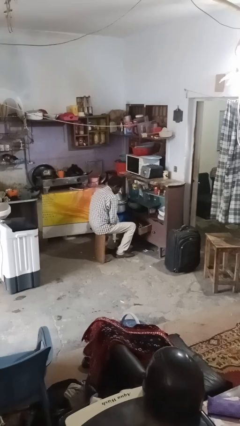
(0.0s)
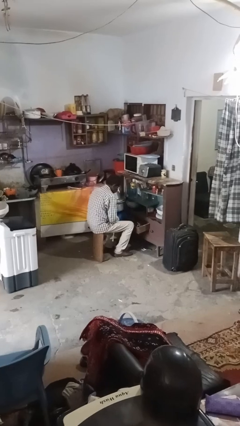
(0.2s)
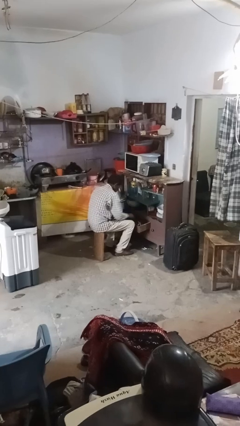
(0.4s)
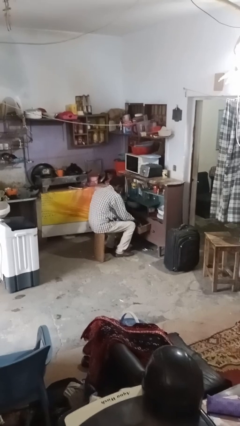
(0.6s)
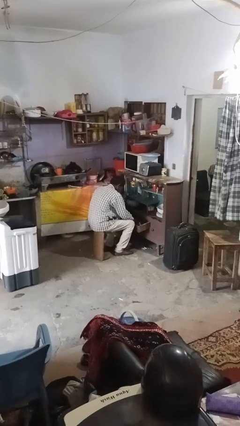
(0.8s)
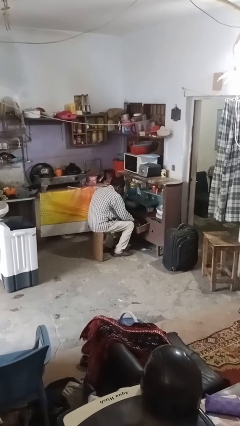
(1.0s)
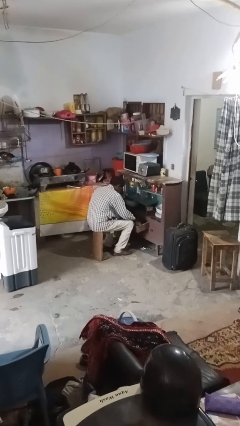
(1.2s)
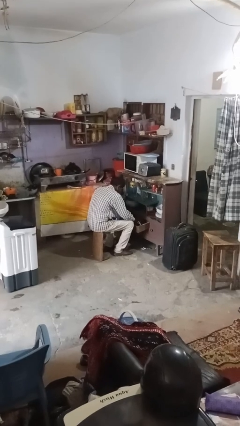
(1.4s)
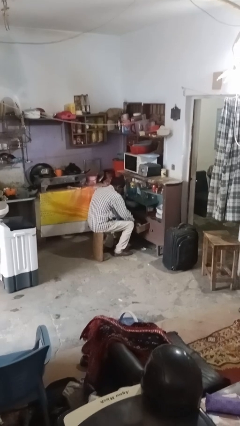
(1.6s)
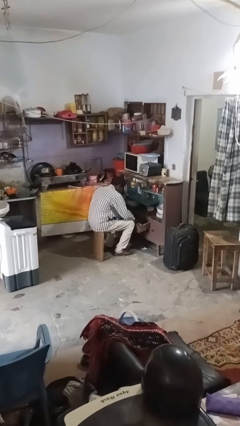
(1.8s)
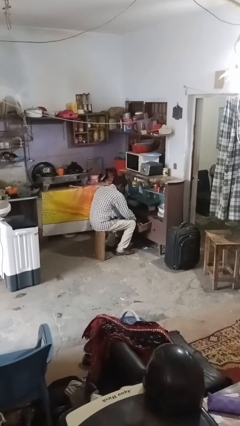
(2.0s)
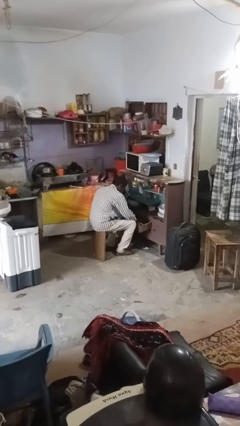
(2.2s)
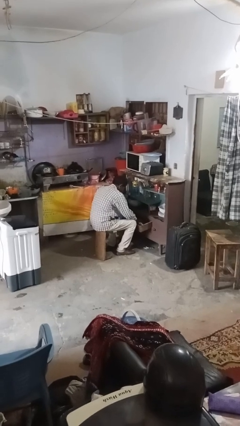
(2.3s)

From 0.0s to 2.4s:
person searches in kitchen drawer

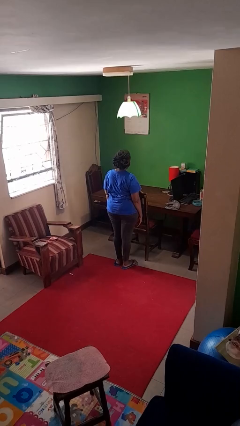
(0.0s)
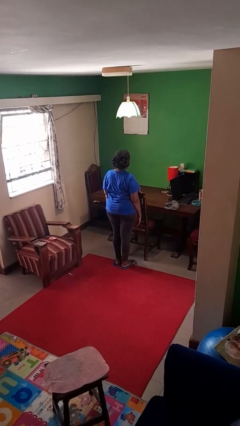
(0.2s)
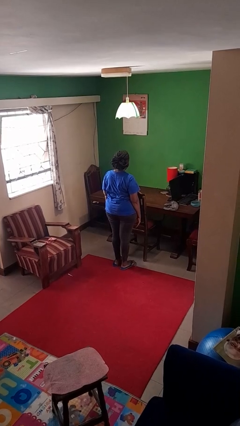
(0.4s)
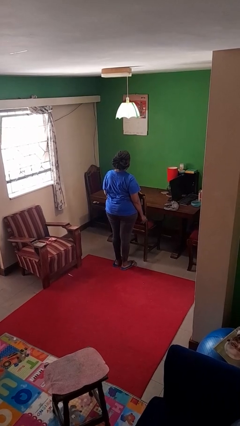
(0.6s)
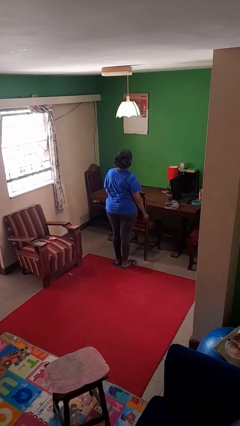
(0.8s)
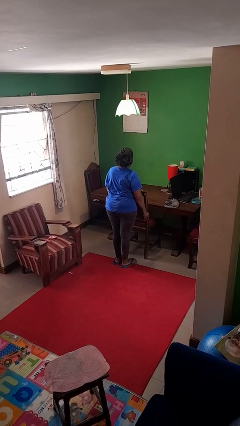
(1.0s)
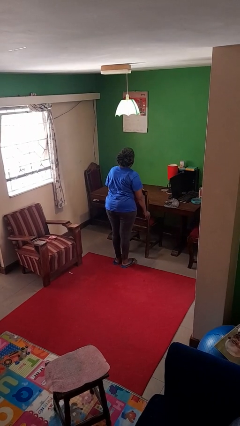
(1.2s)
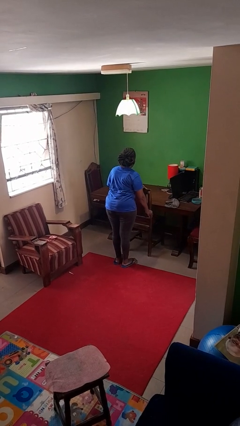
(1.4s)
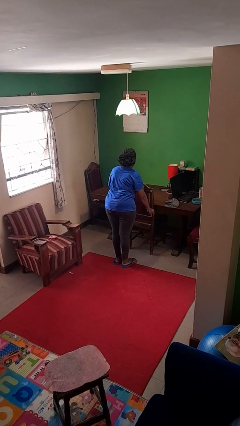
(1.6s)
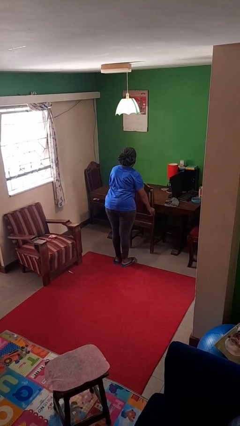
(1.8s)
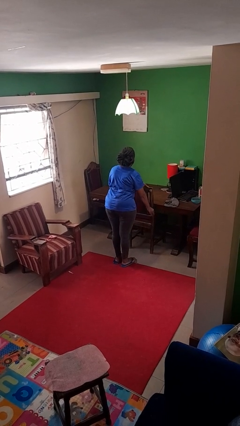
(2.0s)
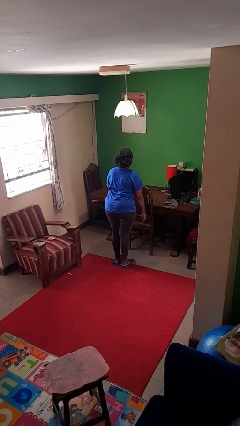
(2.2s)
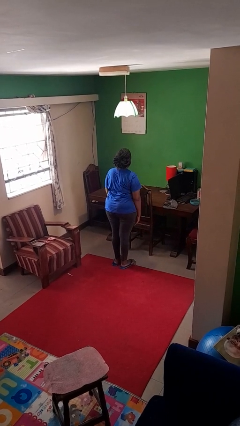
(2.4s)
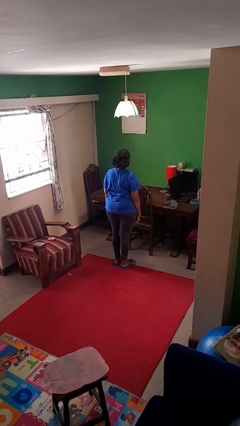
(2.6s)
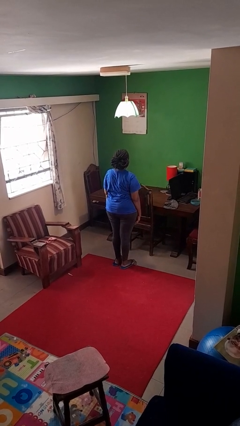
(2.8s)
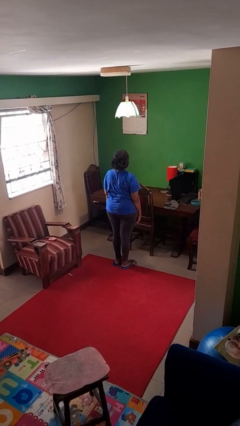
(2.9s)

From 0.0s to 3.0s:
person pushes in chair

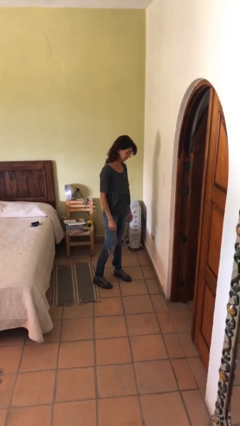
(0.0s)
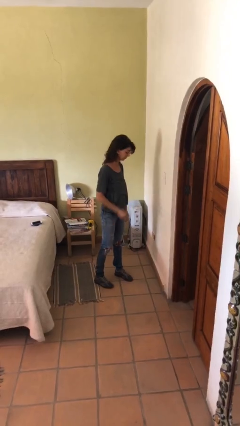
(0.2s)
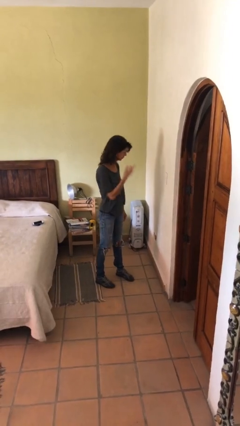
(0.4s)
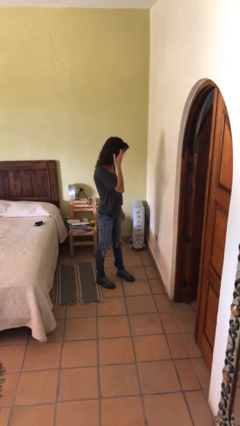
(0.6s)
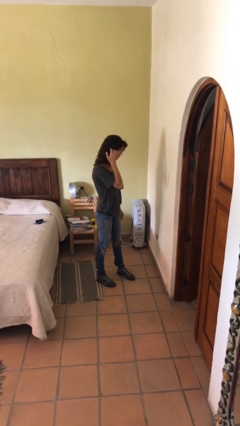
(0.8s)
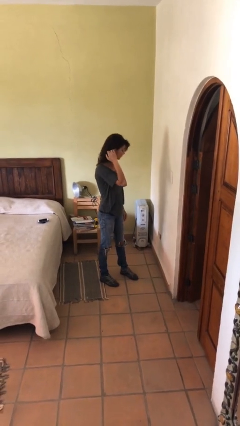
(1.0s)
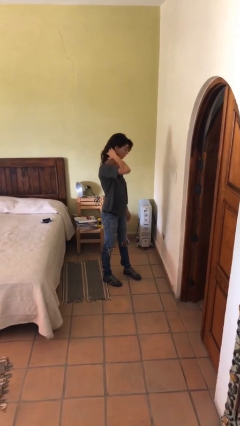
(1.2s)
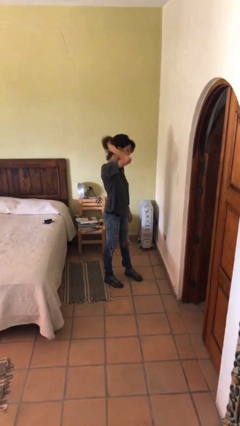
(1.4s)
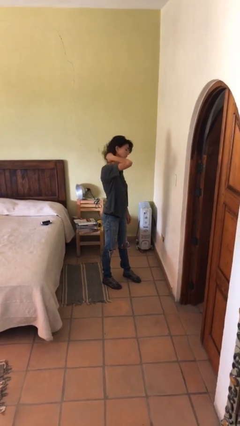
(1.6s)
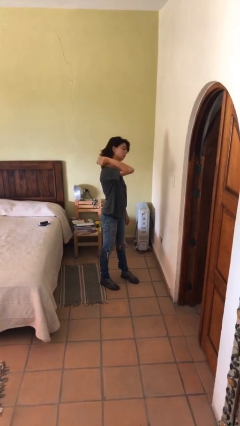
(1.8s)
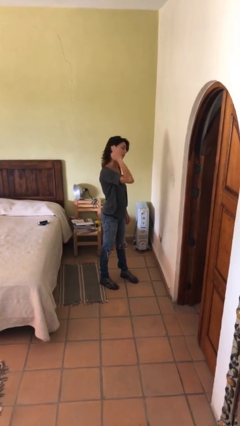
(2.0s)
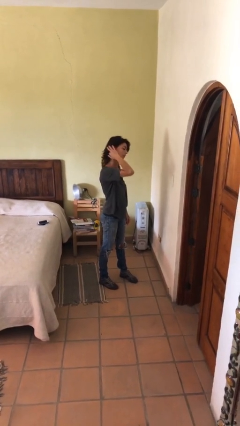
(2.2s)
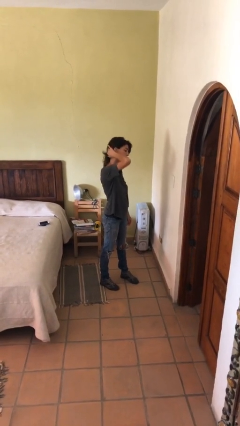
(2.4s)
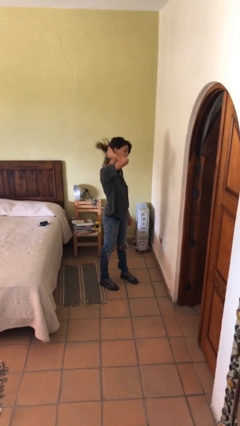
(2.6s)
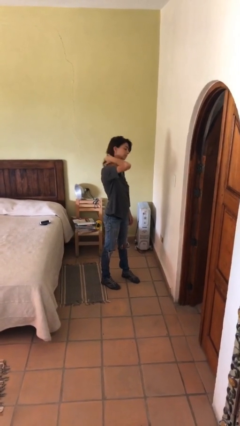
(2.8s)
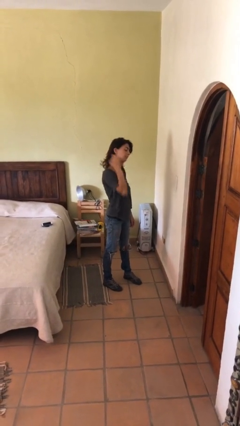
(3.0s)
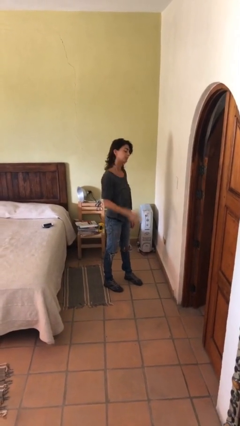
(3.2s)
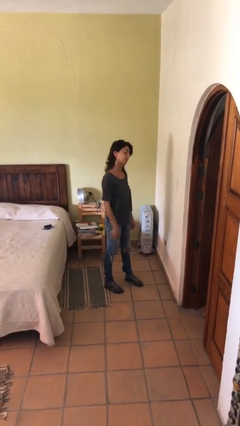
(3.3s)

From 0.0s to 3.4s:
person strokes hair

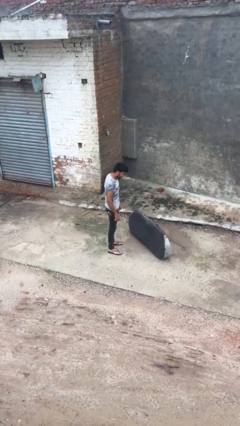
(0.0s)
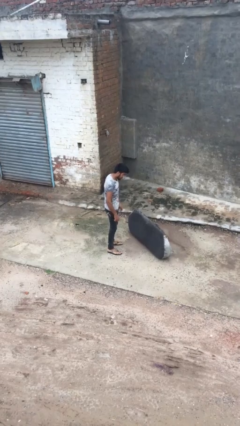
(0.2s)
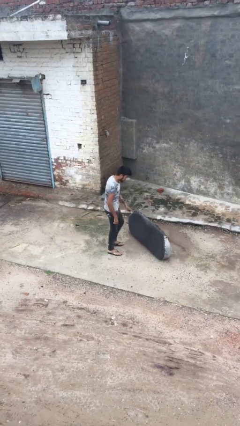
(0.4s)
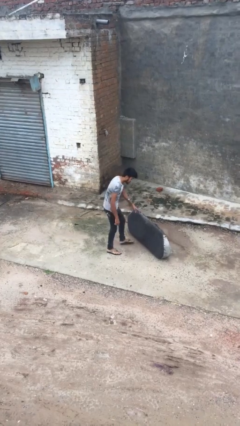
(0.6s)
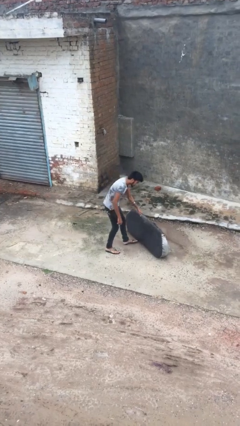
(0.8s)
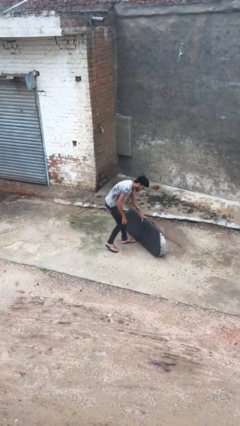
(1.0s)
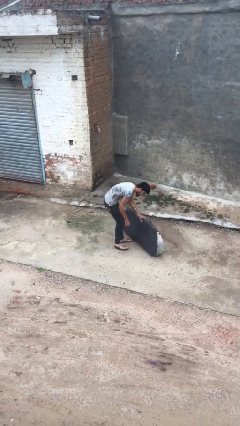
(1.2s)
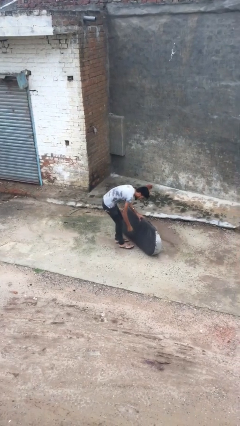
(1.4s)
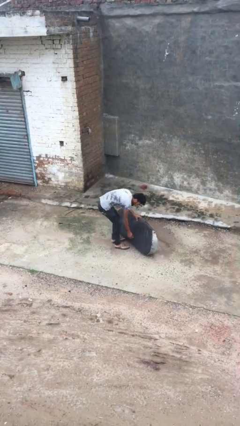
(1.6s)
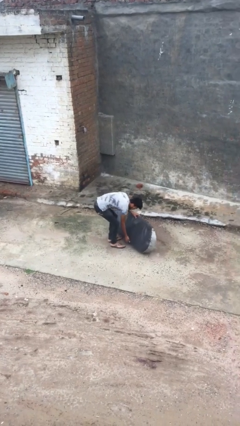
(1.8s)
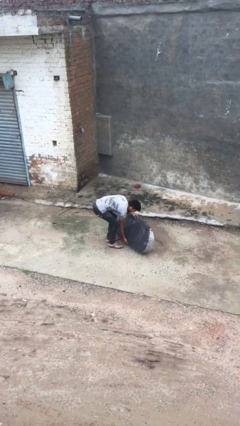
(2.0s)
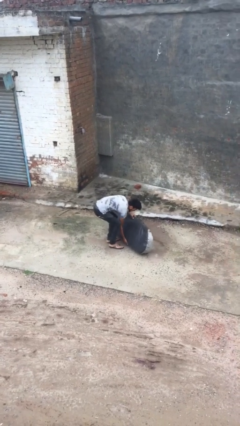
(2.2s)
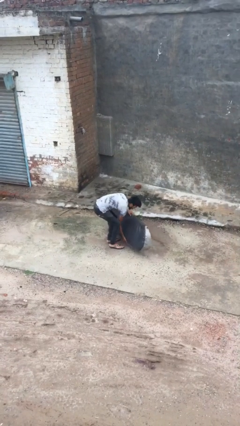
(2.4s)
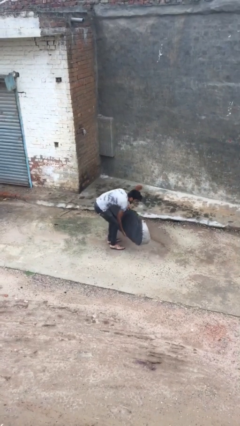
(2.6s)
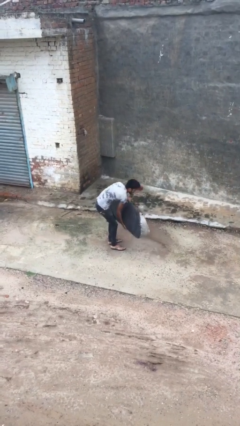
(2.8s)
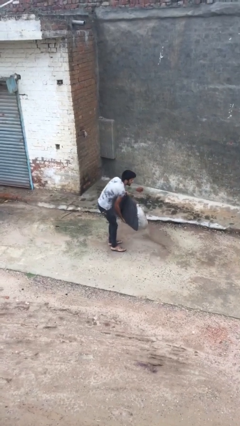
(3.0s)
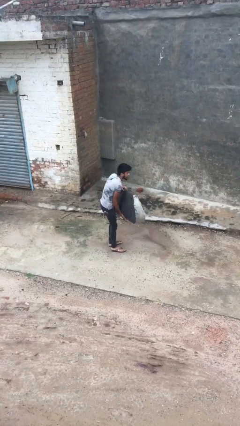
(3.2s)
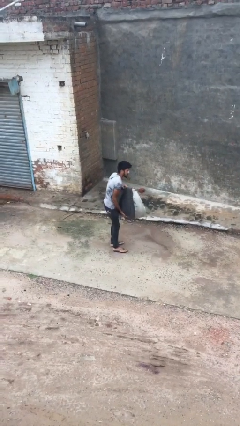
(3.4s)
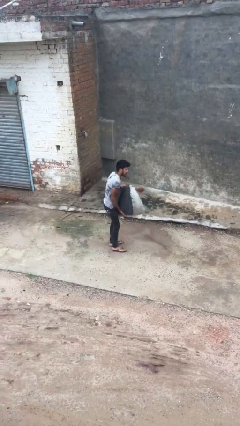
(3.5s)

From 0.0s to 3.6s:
person picks up object from floor

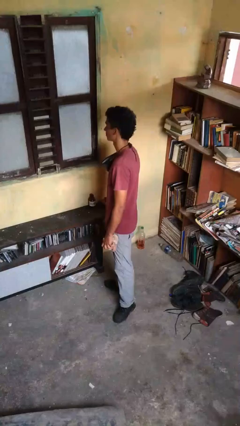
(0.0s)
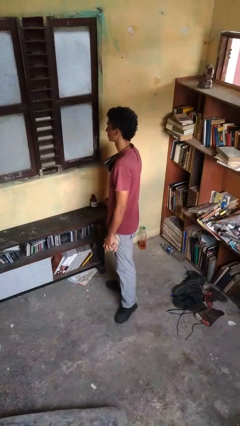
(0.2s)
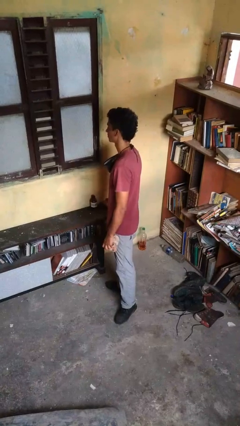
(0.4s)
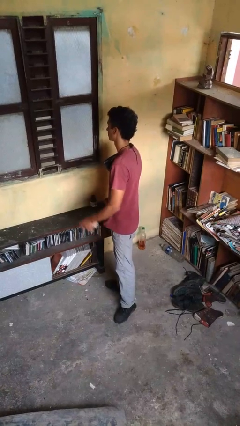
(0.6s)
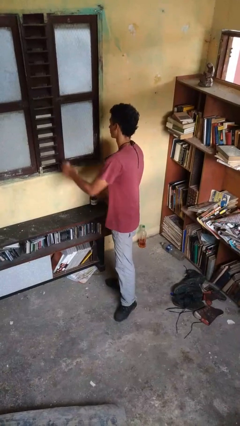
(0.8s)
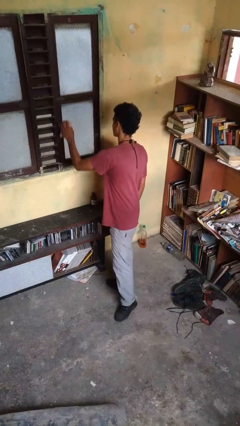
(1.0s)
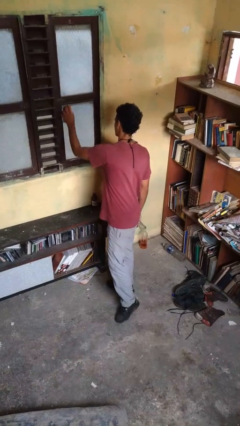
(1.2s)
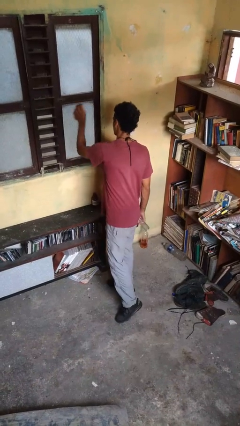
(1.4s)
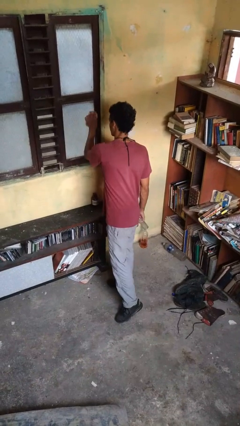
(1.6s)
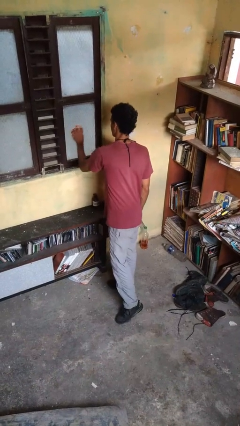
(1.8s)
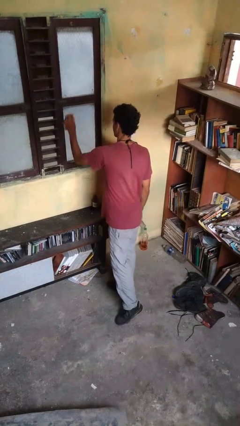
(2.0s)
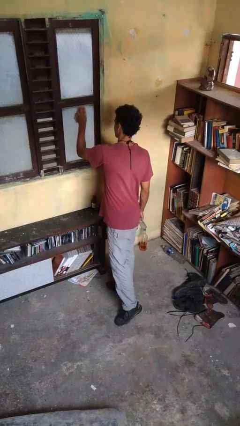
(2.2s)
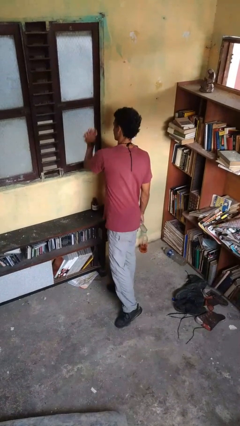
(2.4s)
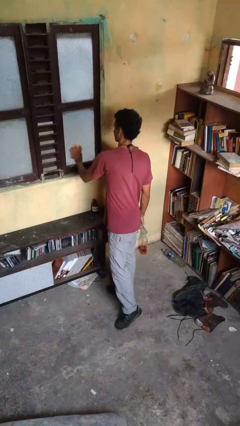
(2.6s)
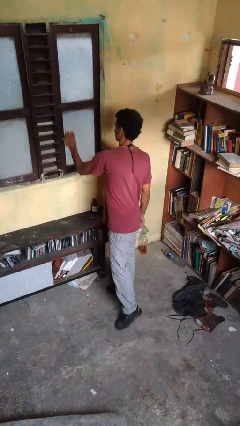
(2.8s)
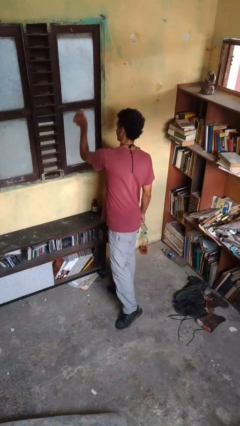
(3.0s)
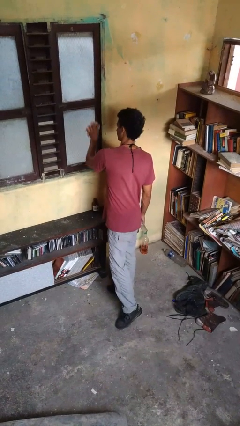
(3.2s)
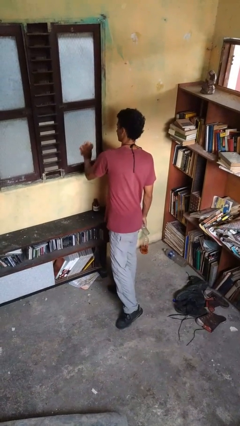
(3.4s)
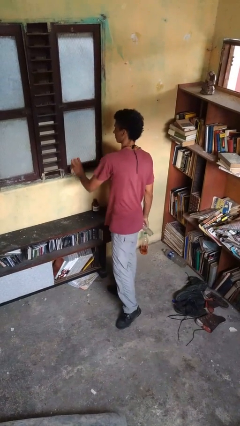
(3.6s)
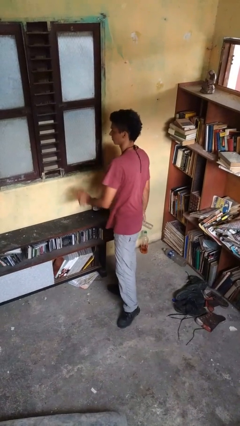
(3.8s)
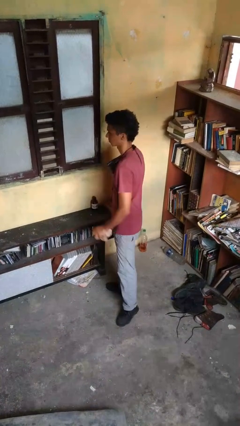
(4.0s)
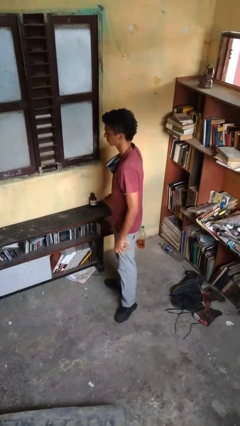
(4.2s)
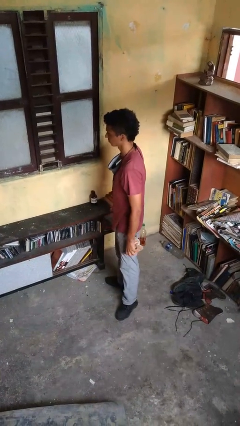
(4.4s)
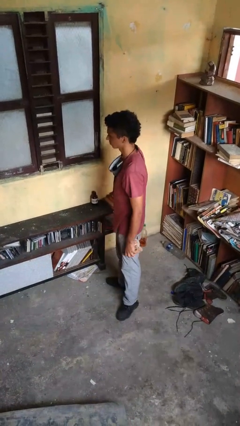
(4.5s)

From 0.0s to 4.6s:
person washes window

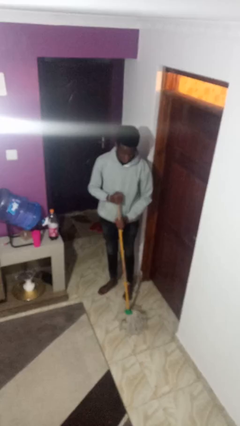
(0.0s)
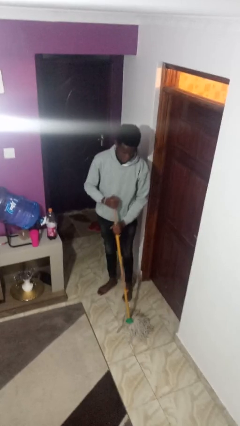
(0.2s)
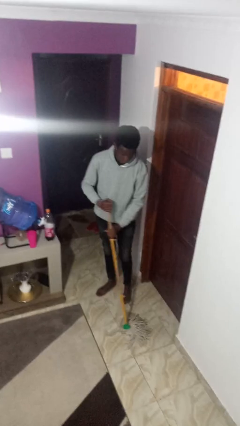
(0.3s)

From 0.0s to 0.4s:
person mops

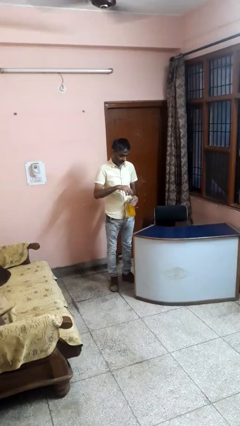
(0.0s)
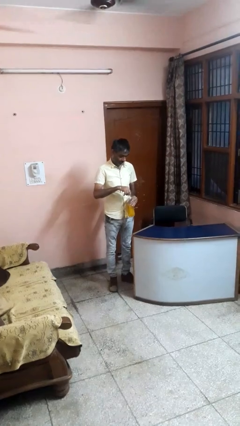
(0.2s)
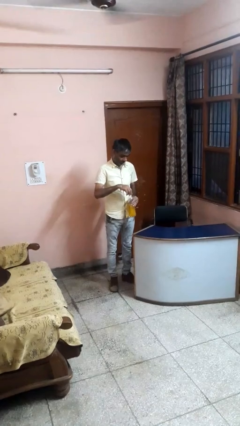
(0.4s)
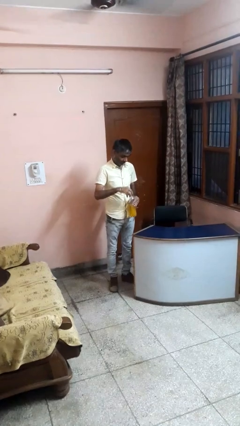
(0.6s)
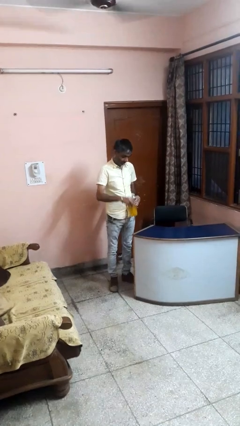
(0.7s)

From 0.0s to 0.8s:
person unscrews lid from bottle
